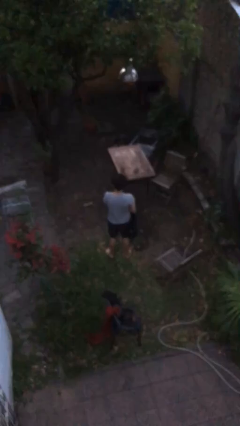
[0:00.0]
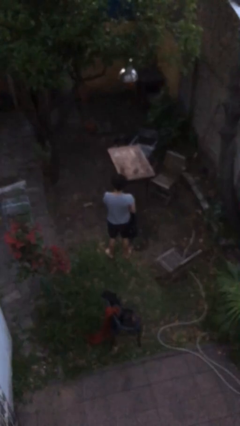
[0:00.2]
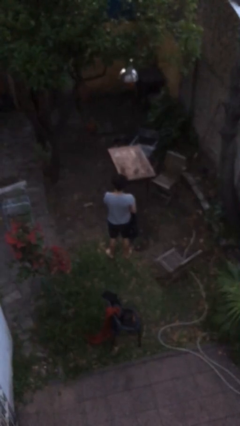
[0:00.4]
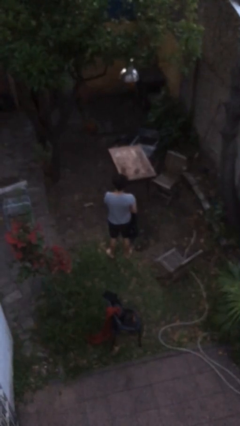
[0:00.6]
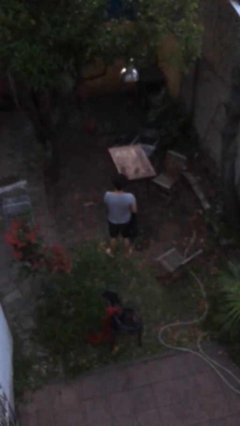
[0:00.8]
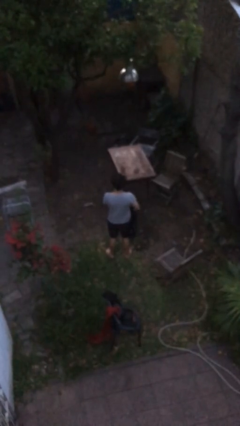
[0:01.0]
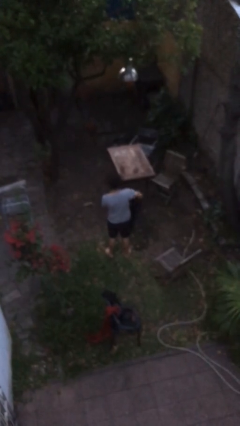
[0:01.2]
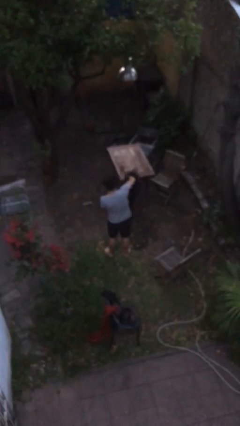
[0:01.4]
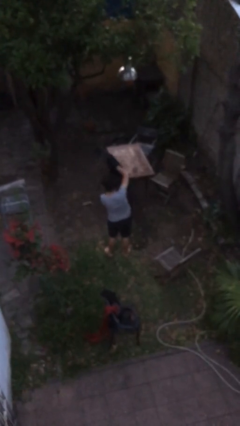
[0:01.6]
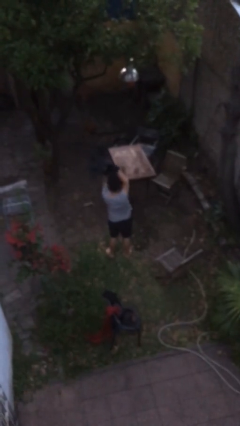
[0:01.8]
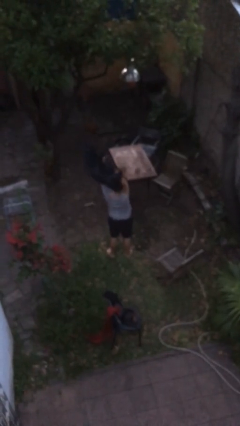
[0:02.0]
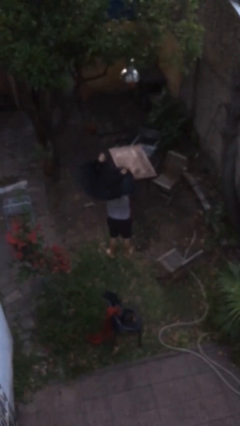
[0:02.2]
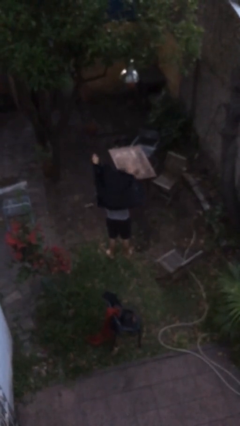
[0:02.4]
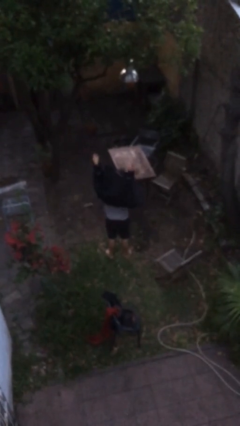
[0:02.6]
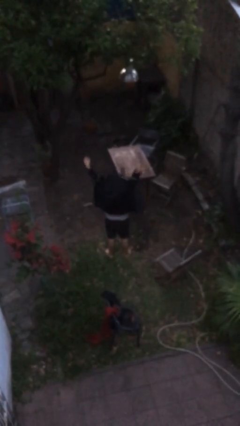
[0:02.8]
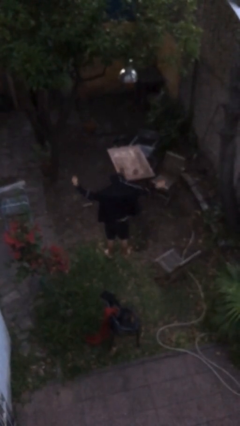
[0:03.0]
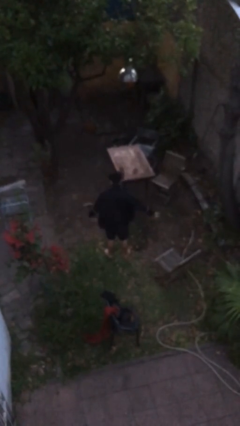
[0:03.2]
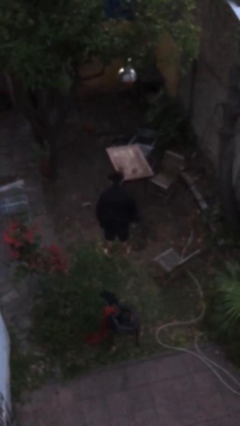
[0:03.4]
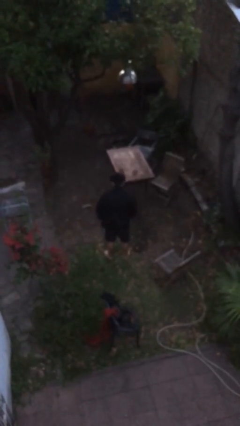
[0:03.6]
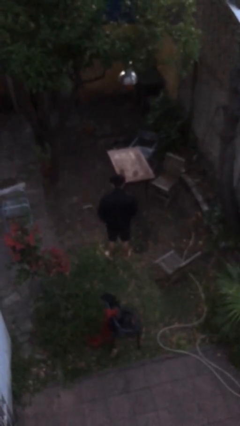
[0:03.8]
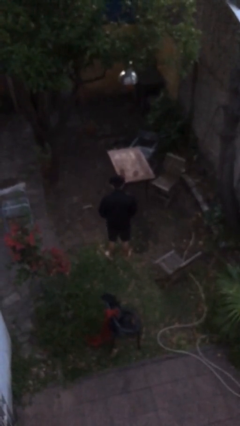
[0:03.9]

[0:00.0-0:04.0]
person puts on jacket

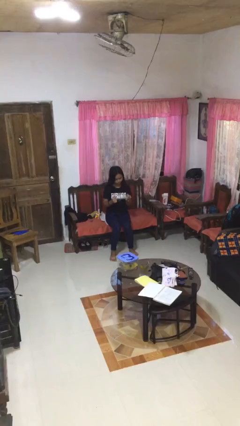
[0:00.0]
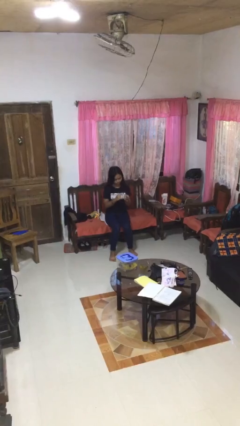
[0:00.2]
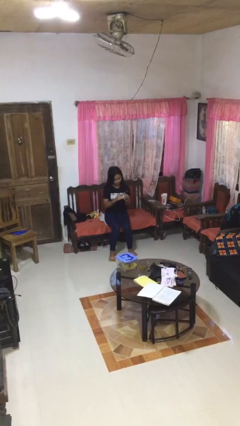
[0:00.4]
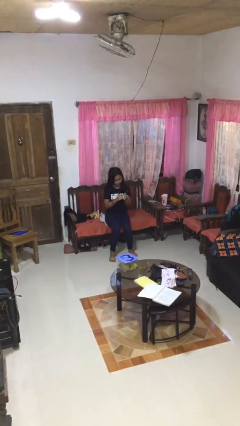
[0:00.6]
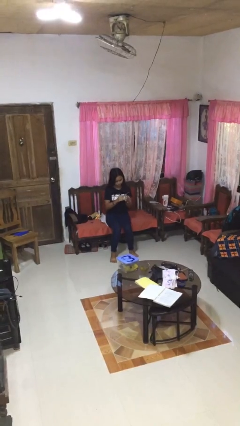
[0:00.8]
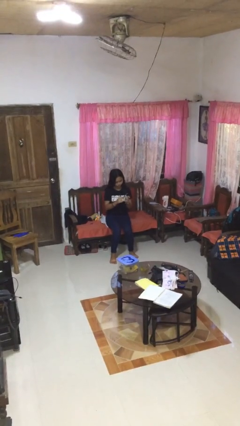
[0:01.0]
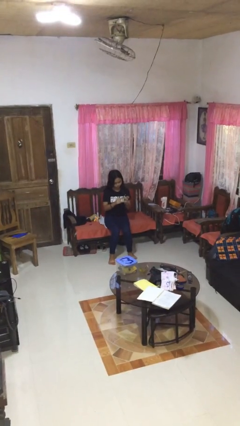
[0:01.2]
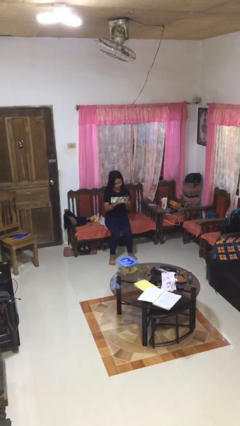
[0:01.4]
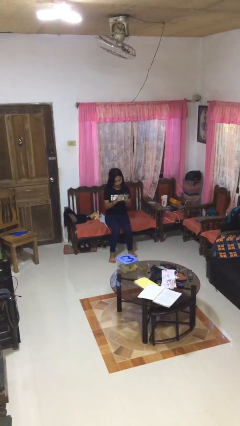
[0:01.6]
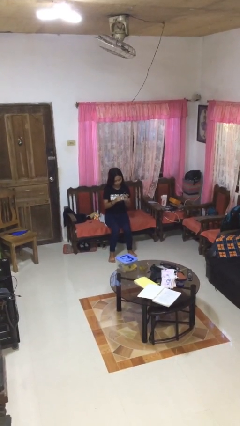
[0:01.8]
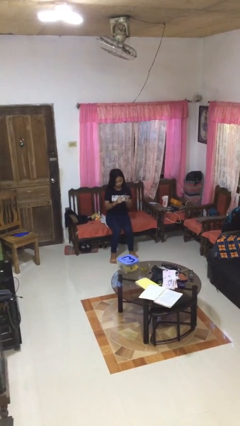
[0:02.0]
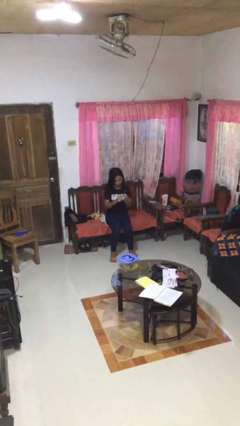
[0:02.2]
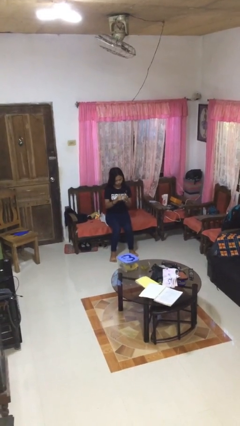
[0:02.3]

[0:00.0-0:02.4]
person files fingernails

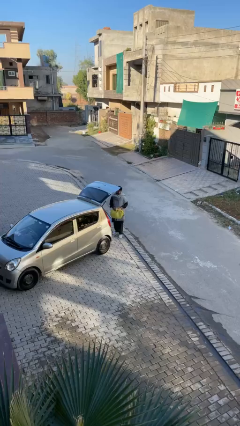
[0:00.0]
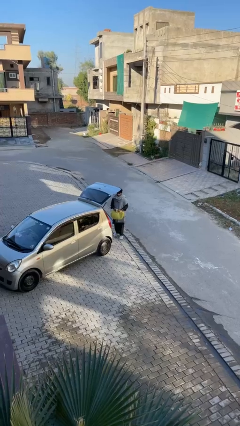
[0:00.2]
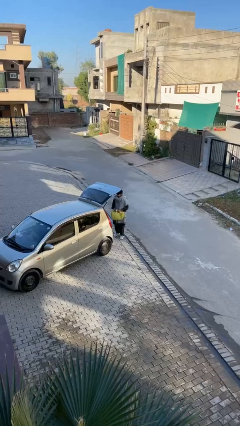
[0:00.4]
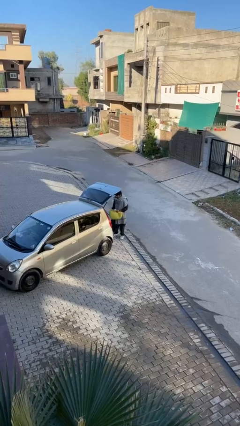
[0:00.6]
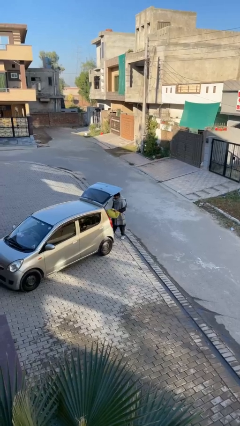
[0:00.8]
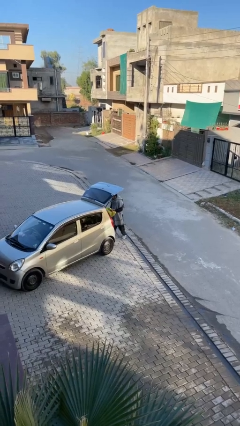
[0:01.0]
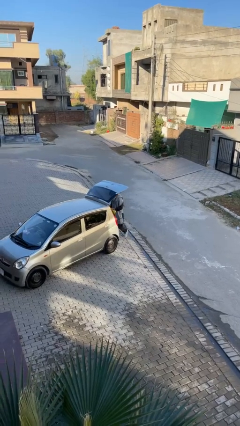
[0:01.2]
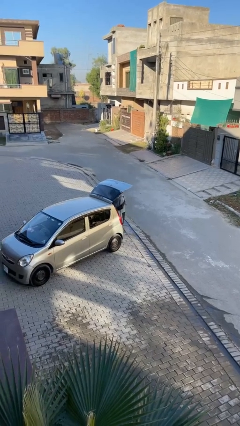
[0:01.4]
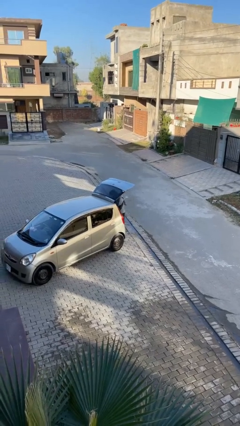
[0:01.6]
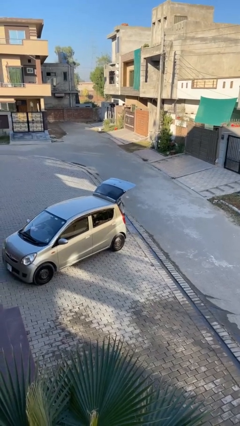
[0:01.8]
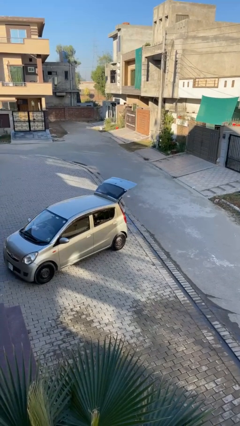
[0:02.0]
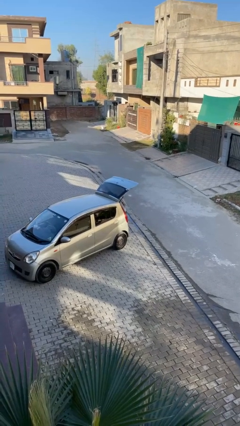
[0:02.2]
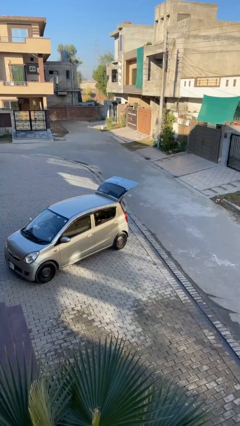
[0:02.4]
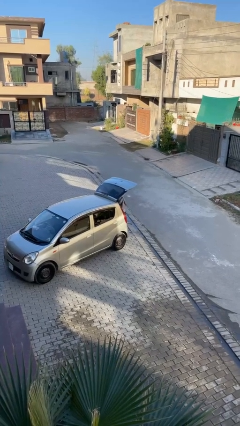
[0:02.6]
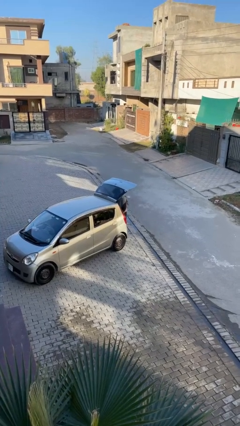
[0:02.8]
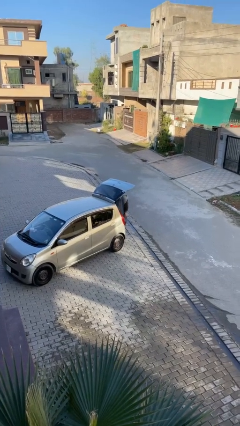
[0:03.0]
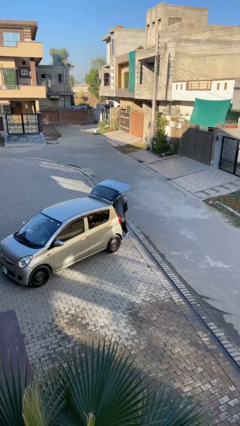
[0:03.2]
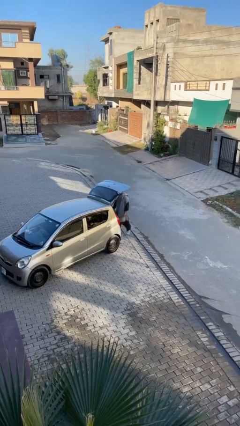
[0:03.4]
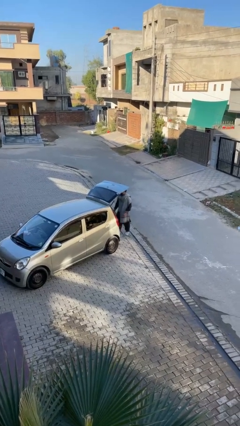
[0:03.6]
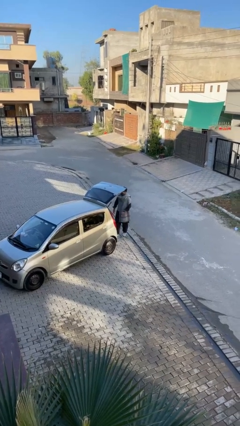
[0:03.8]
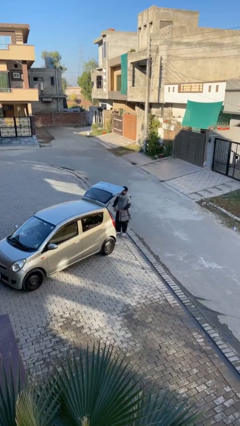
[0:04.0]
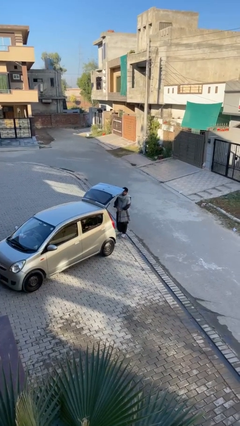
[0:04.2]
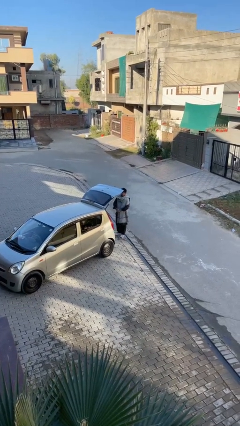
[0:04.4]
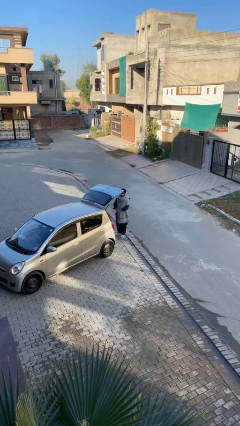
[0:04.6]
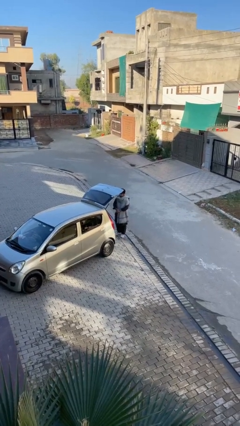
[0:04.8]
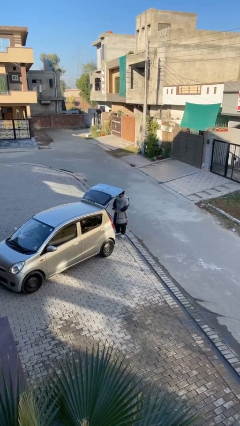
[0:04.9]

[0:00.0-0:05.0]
person loads car

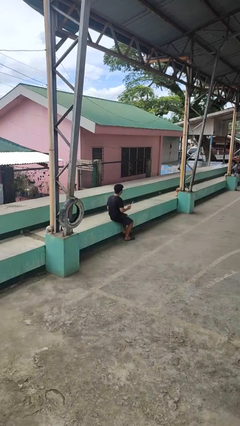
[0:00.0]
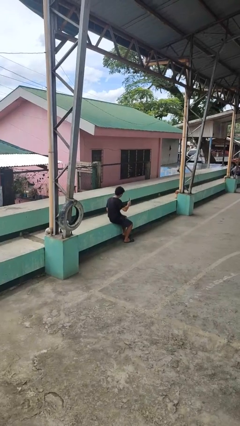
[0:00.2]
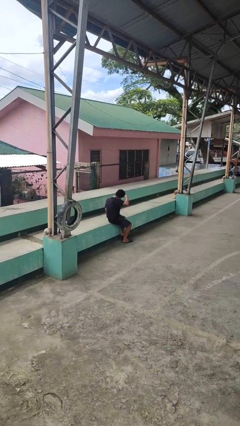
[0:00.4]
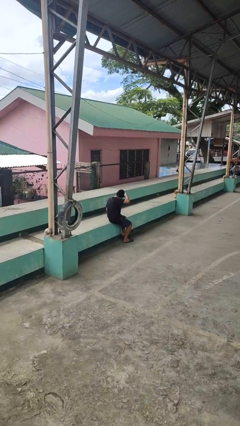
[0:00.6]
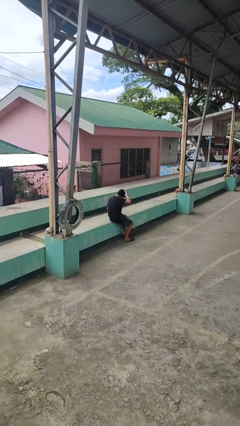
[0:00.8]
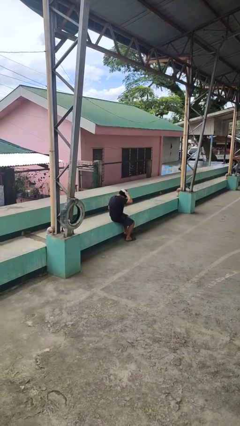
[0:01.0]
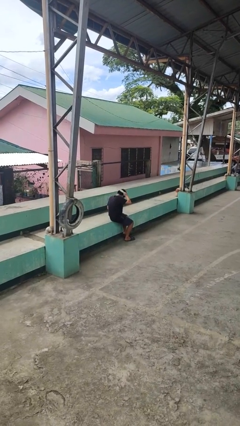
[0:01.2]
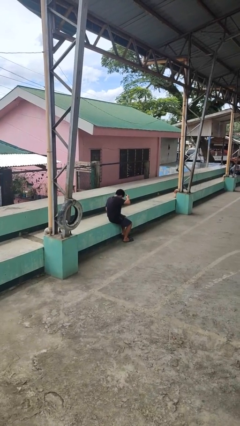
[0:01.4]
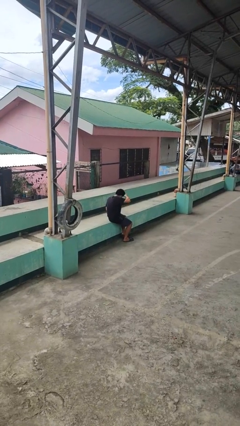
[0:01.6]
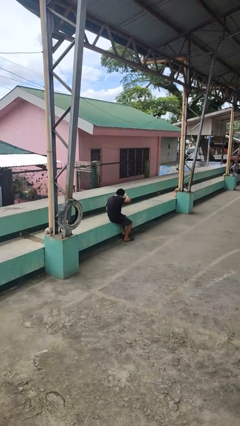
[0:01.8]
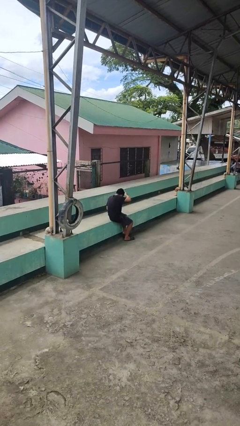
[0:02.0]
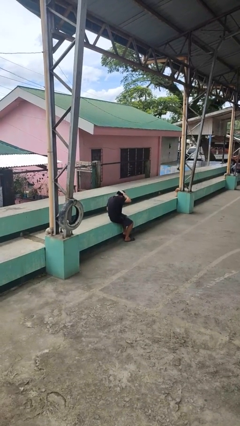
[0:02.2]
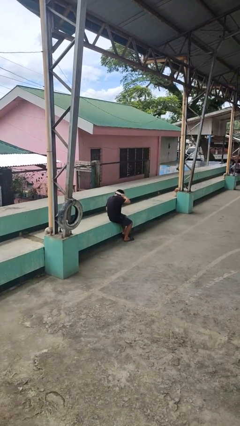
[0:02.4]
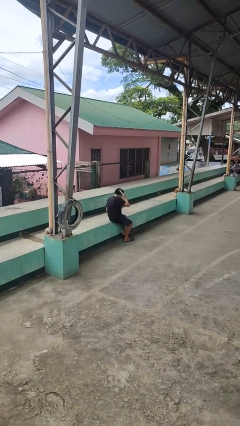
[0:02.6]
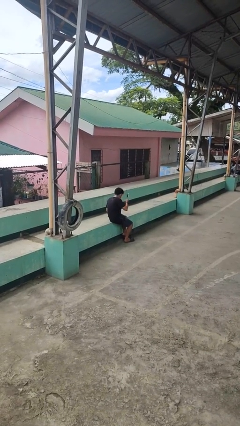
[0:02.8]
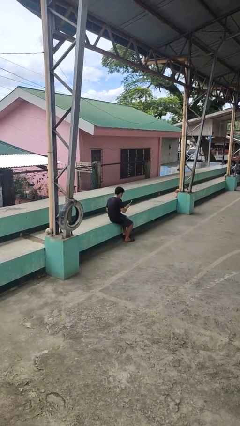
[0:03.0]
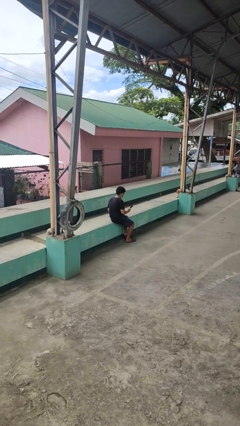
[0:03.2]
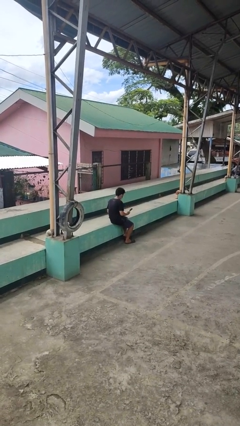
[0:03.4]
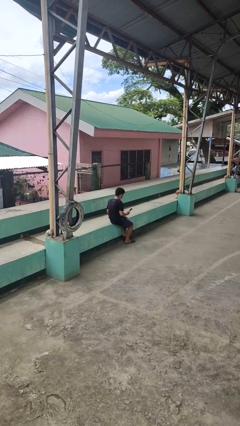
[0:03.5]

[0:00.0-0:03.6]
person brushes hair

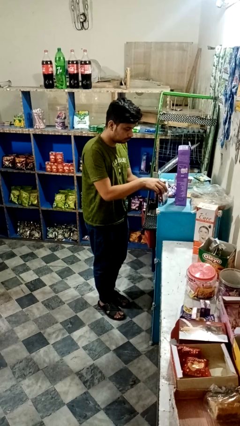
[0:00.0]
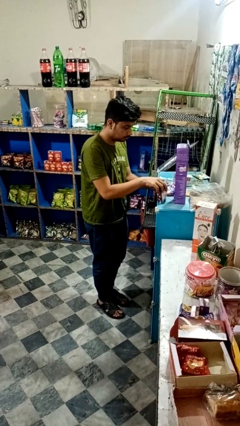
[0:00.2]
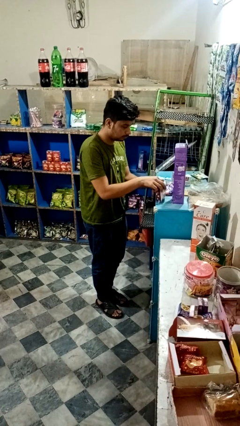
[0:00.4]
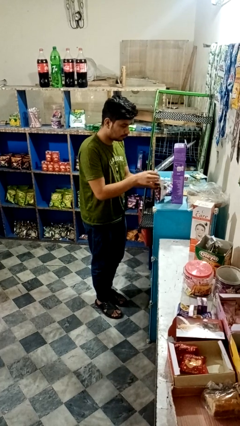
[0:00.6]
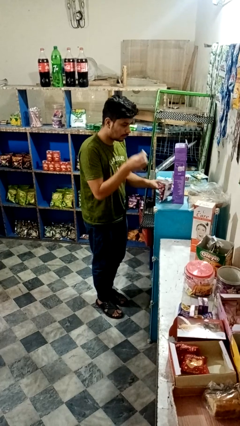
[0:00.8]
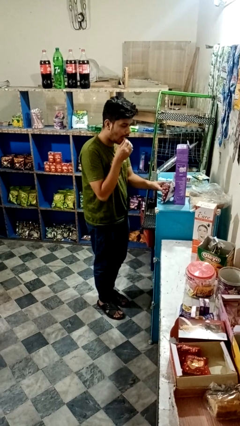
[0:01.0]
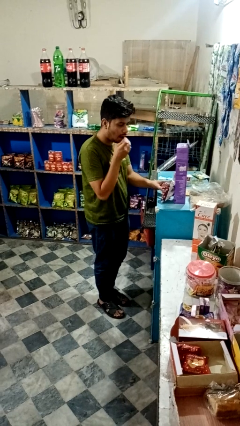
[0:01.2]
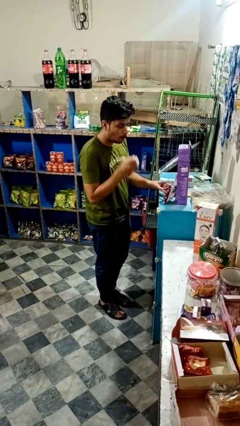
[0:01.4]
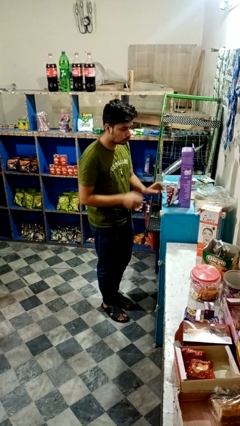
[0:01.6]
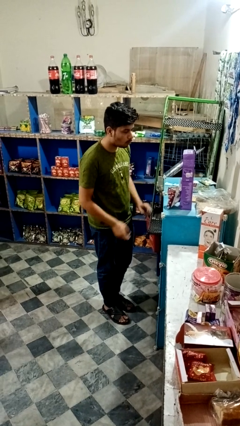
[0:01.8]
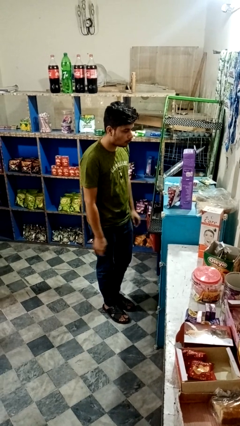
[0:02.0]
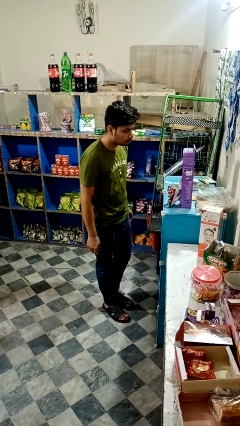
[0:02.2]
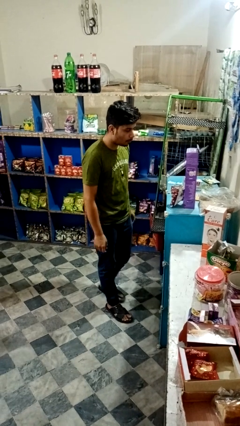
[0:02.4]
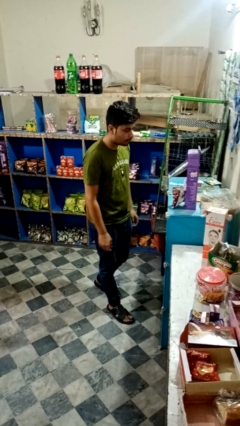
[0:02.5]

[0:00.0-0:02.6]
person eats snack from bag

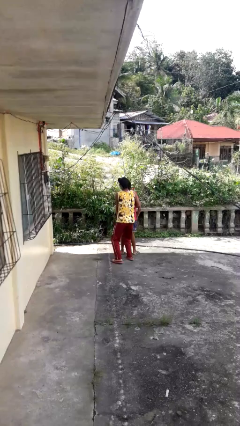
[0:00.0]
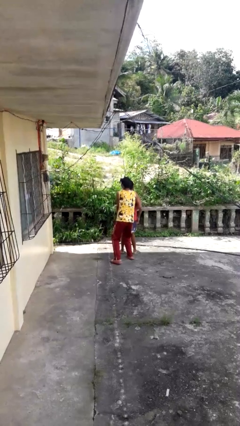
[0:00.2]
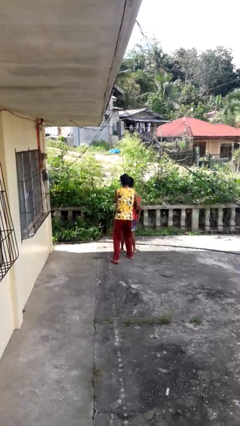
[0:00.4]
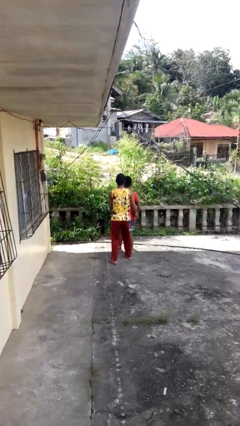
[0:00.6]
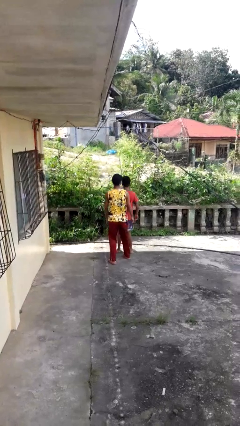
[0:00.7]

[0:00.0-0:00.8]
person puts down person
